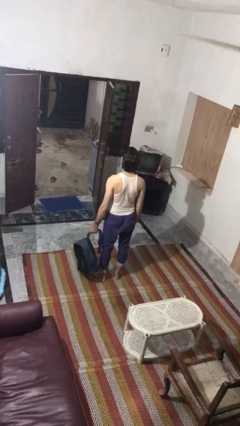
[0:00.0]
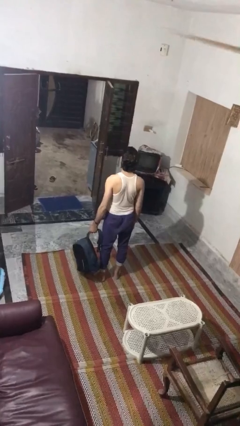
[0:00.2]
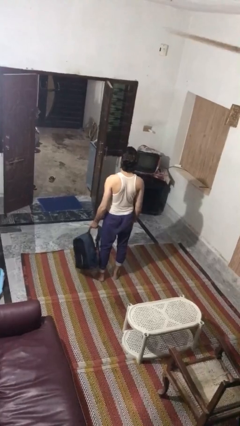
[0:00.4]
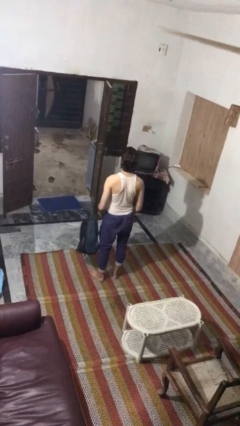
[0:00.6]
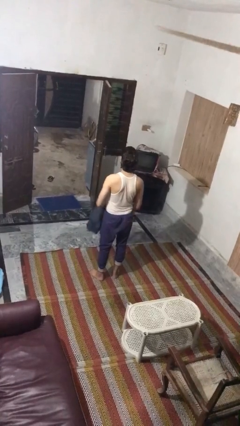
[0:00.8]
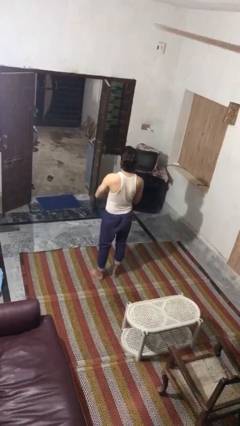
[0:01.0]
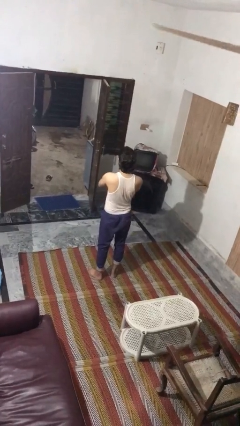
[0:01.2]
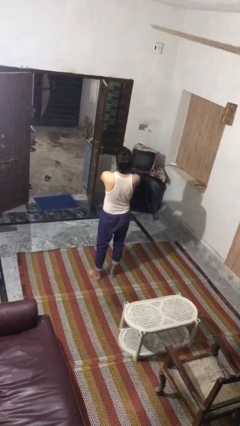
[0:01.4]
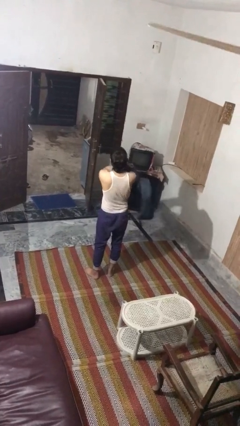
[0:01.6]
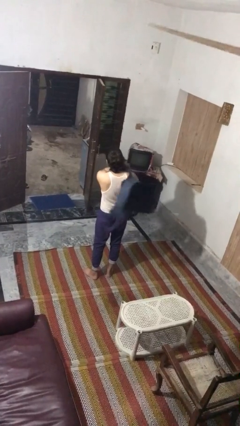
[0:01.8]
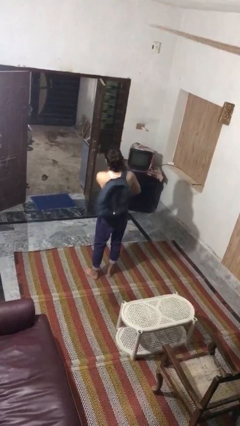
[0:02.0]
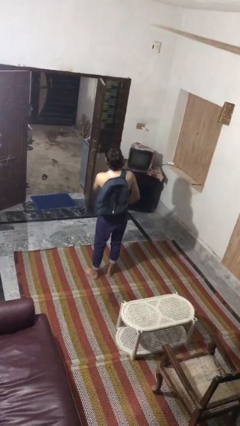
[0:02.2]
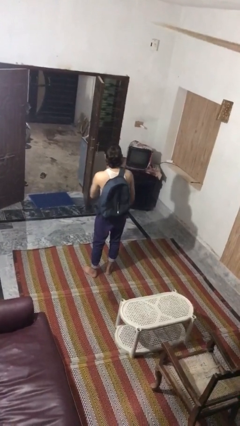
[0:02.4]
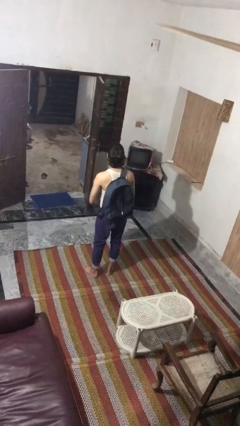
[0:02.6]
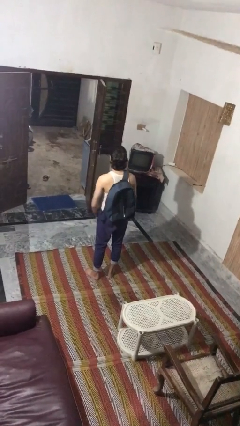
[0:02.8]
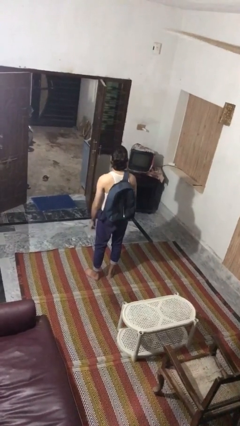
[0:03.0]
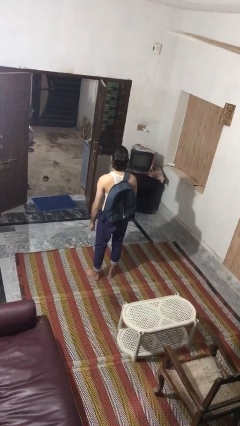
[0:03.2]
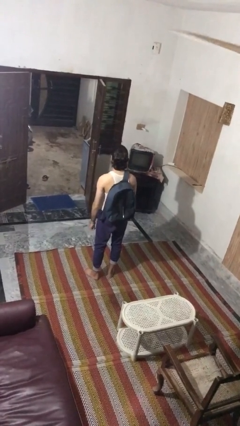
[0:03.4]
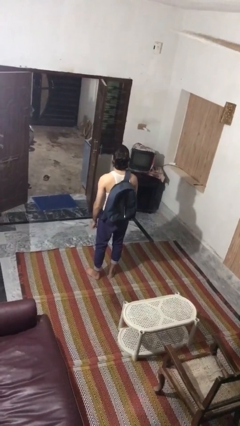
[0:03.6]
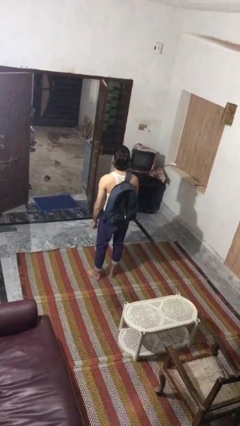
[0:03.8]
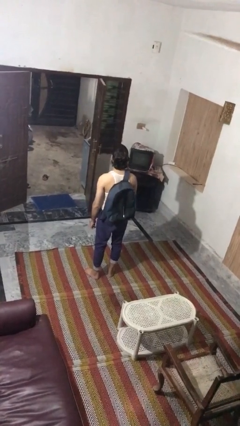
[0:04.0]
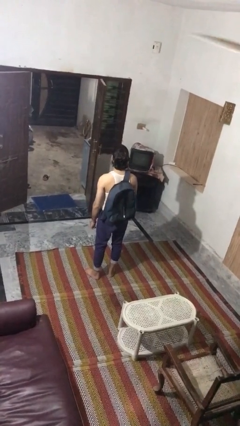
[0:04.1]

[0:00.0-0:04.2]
person puts on backpack

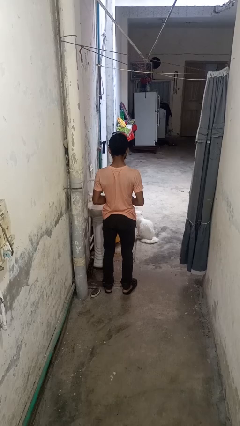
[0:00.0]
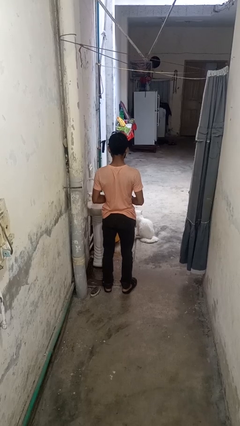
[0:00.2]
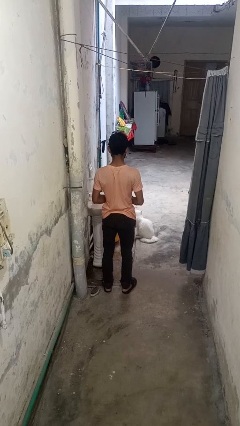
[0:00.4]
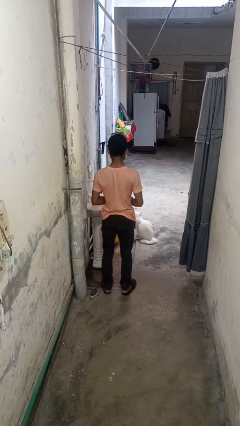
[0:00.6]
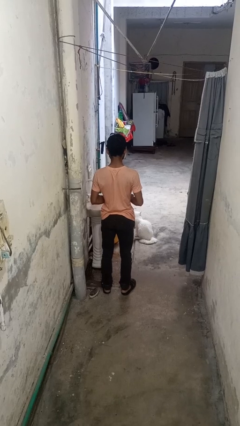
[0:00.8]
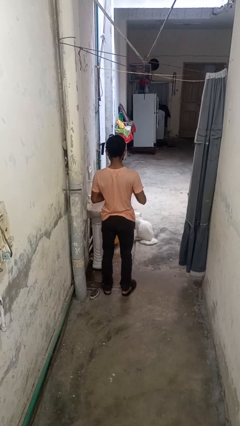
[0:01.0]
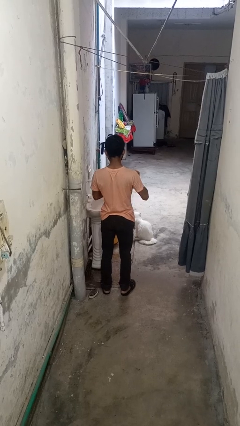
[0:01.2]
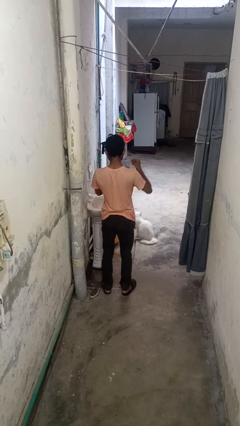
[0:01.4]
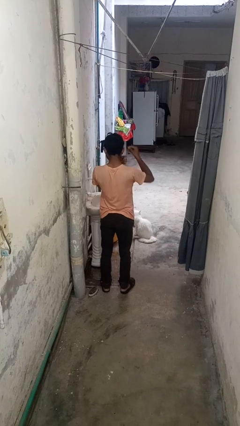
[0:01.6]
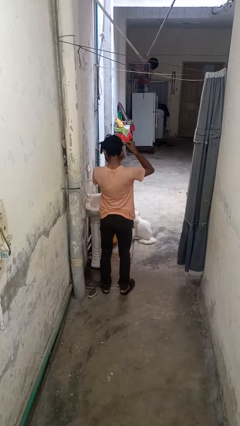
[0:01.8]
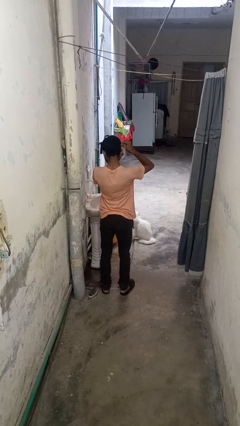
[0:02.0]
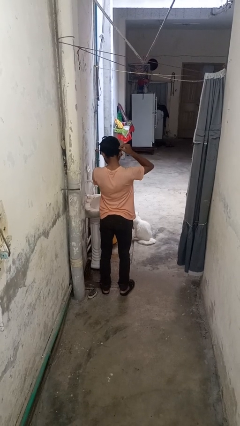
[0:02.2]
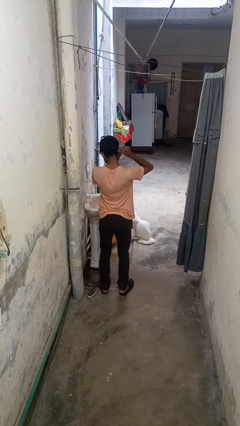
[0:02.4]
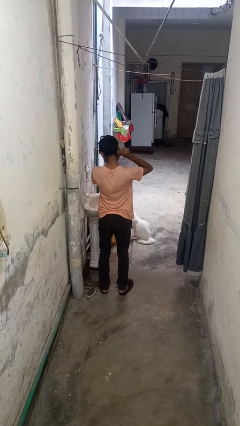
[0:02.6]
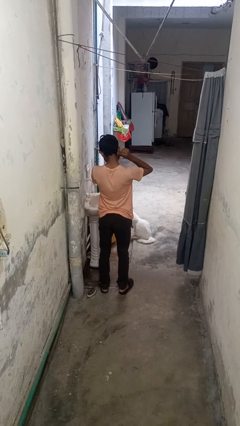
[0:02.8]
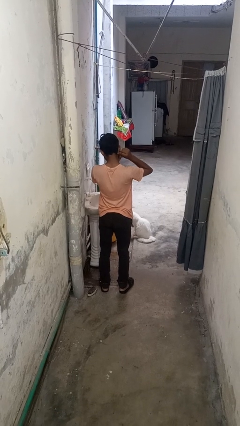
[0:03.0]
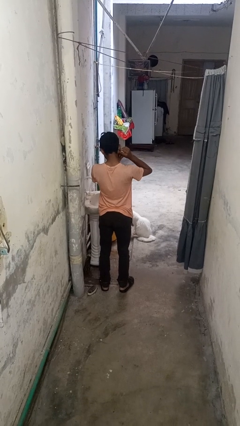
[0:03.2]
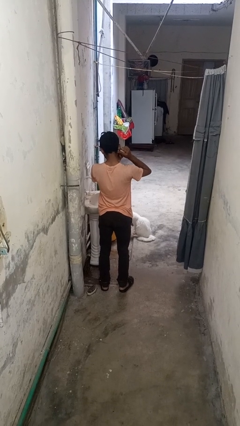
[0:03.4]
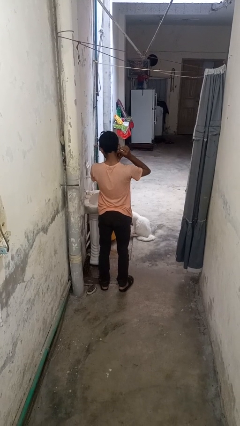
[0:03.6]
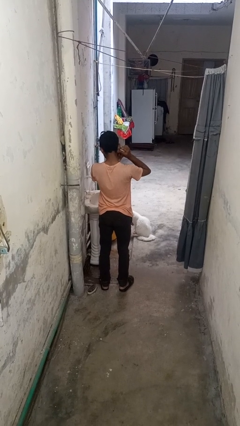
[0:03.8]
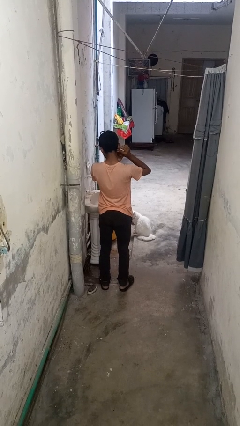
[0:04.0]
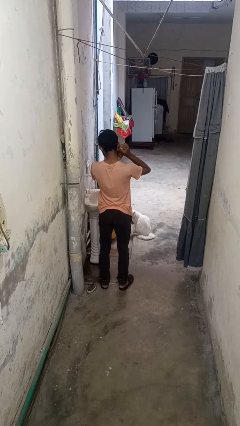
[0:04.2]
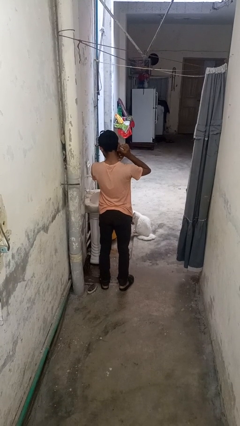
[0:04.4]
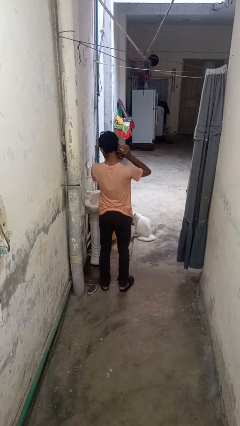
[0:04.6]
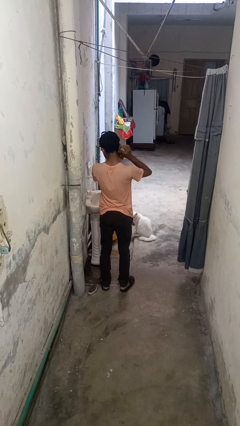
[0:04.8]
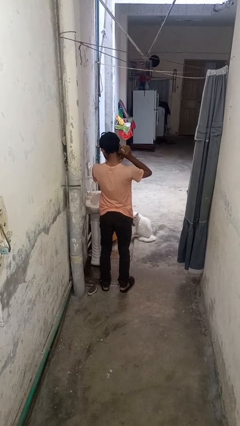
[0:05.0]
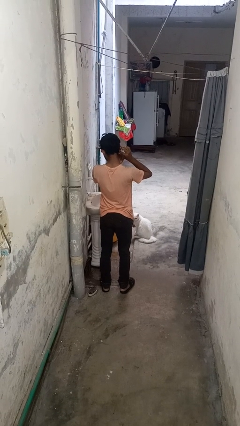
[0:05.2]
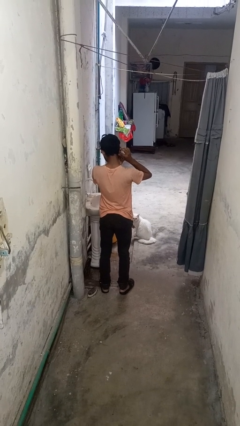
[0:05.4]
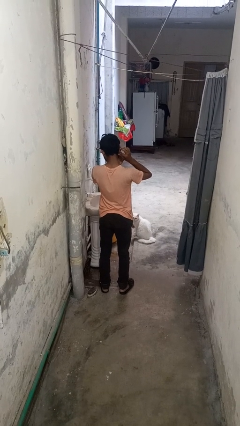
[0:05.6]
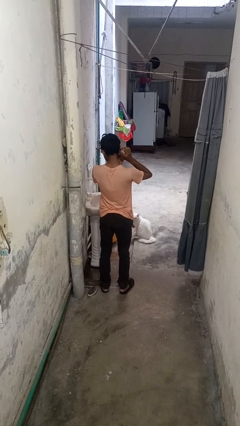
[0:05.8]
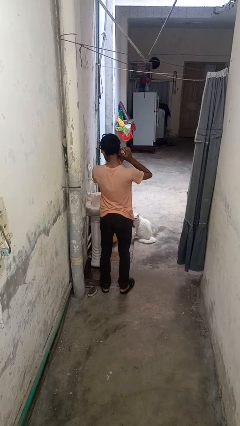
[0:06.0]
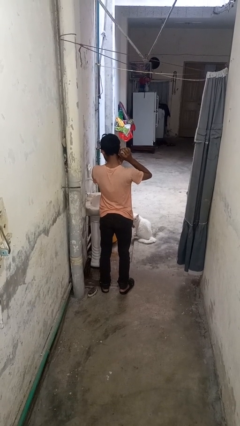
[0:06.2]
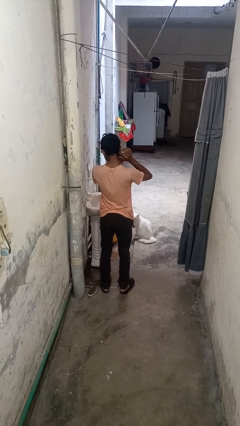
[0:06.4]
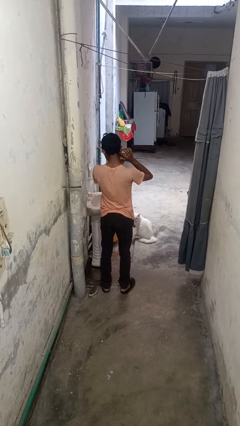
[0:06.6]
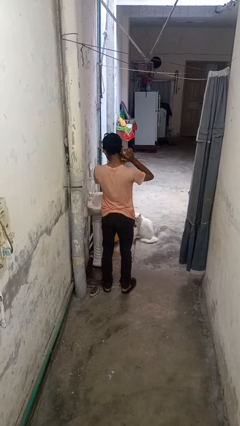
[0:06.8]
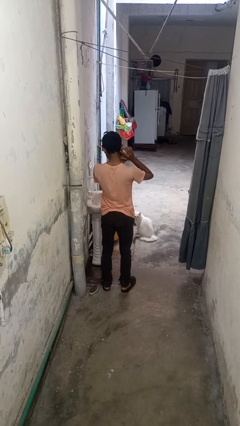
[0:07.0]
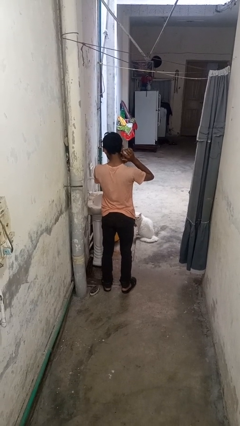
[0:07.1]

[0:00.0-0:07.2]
person puts on earrings

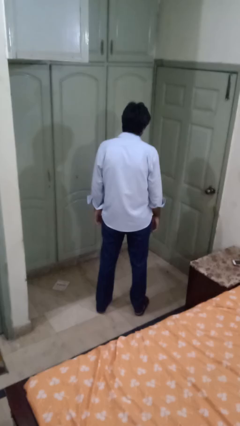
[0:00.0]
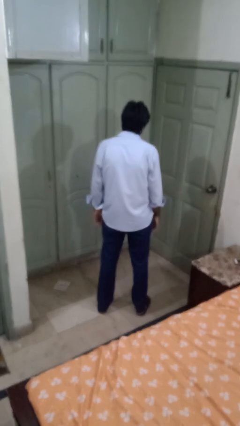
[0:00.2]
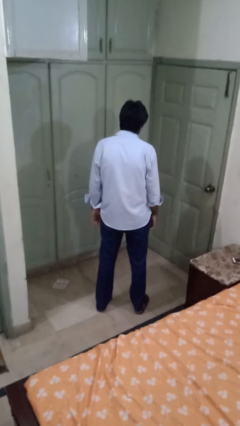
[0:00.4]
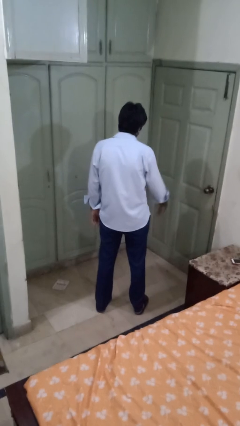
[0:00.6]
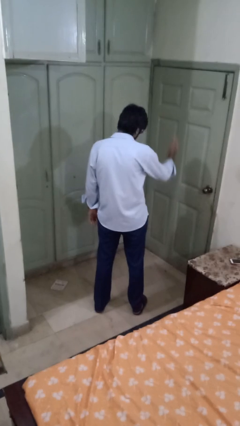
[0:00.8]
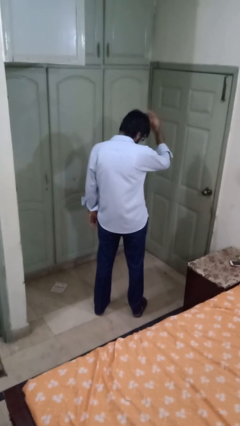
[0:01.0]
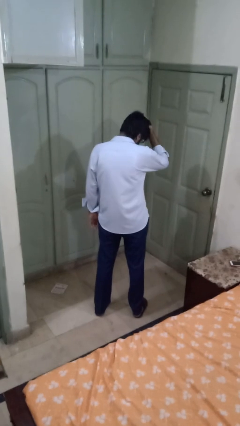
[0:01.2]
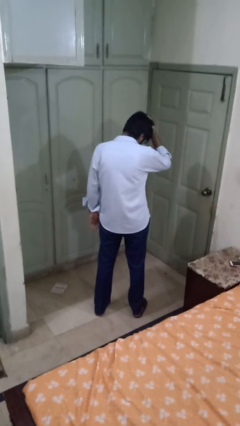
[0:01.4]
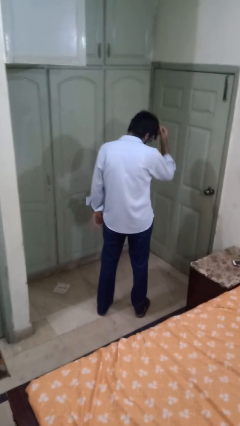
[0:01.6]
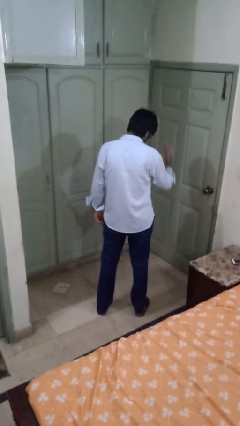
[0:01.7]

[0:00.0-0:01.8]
person pats head

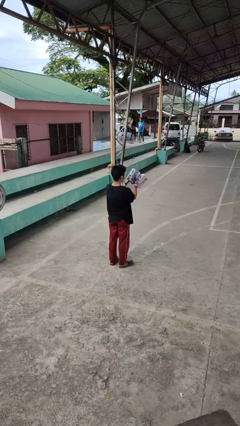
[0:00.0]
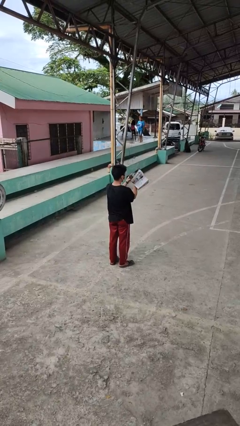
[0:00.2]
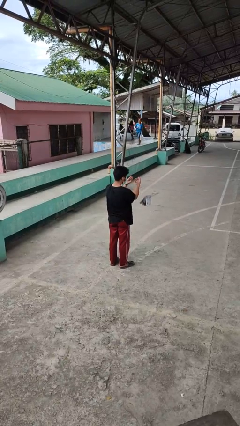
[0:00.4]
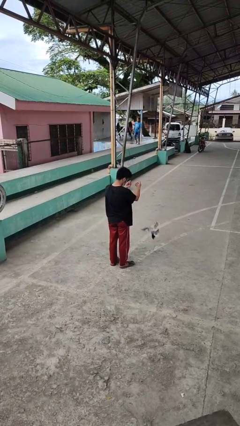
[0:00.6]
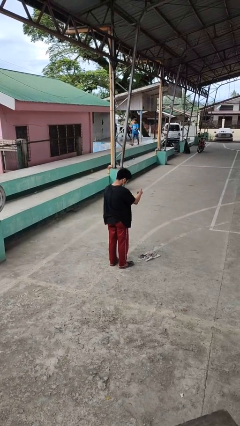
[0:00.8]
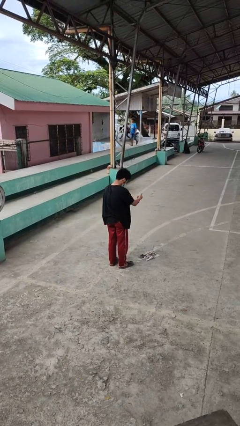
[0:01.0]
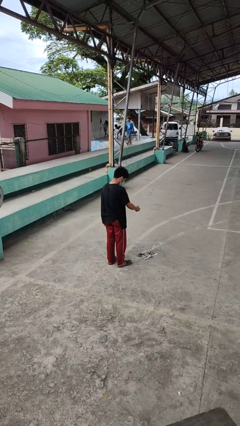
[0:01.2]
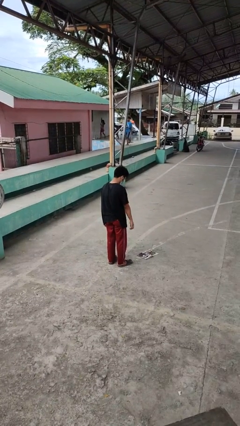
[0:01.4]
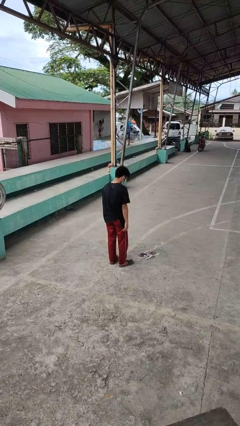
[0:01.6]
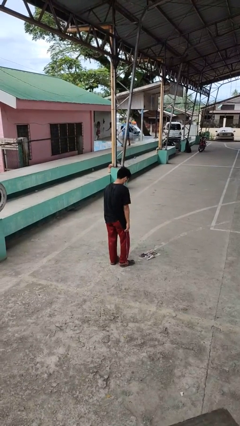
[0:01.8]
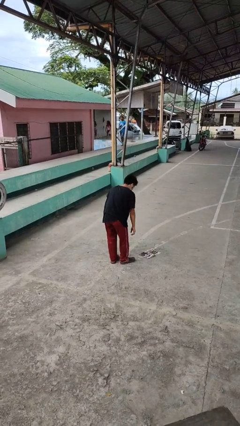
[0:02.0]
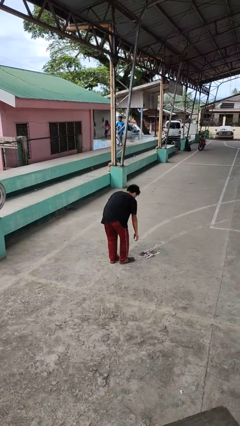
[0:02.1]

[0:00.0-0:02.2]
person drops object

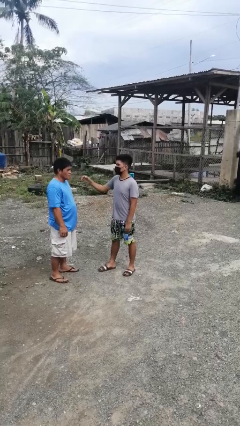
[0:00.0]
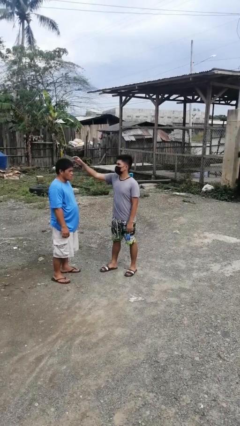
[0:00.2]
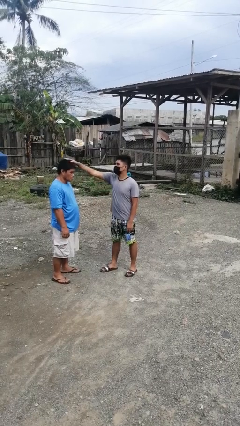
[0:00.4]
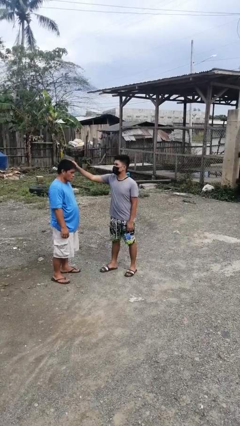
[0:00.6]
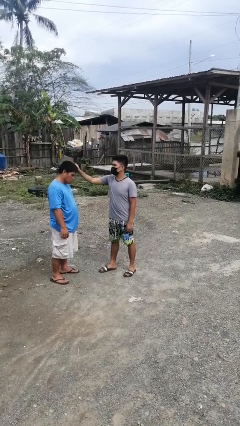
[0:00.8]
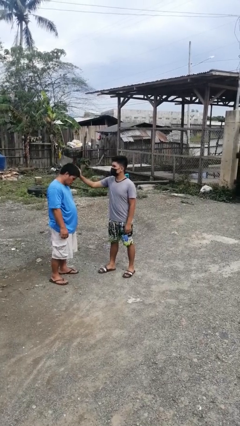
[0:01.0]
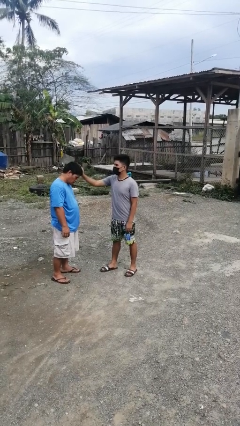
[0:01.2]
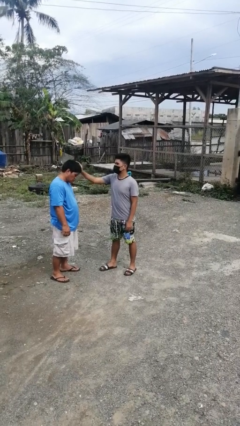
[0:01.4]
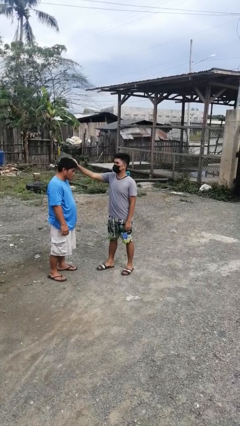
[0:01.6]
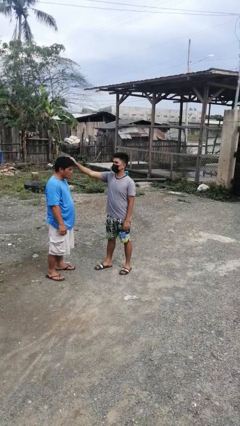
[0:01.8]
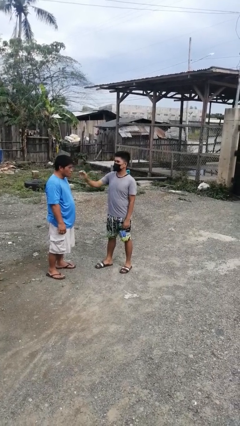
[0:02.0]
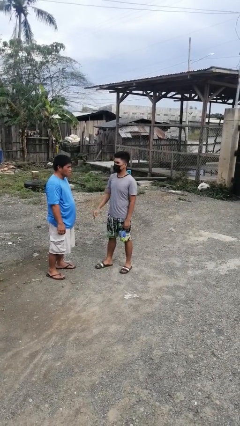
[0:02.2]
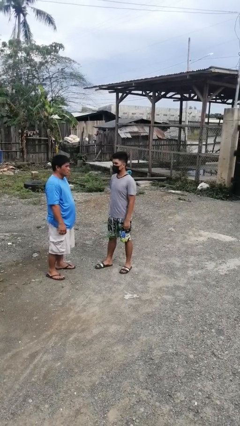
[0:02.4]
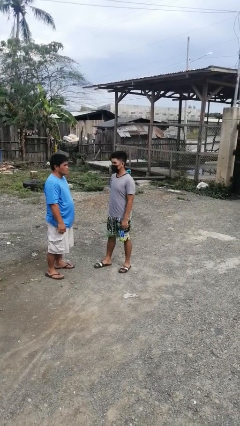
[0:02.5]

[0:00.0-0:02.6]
person grabs person by hair
